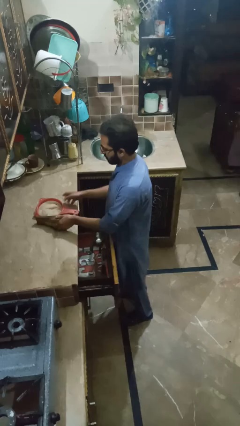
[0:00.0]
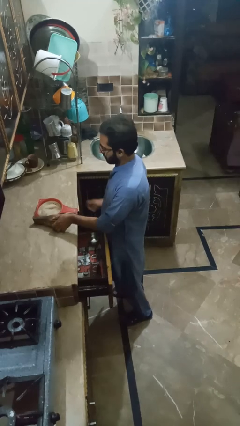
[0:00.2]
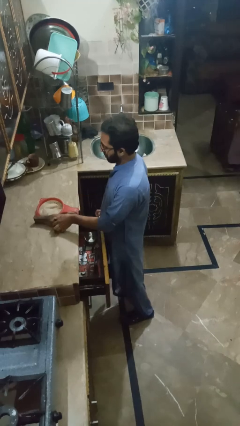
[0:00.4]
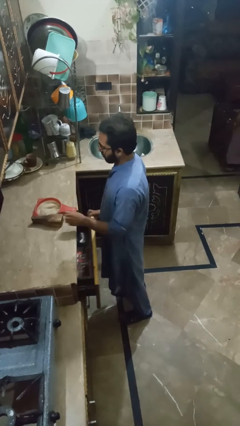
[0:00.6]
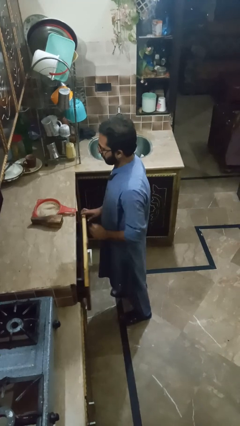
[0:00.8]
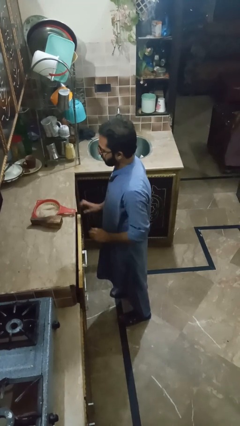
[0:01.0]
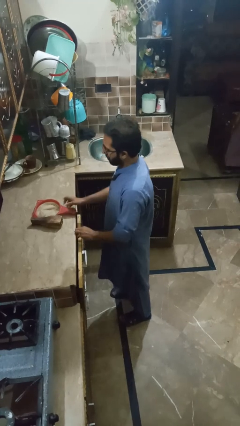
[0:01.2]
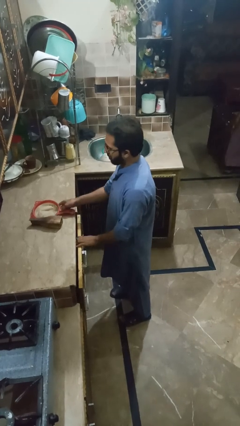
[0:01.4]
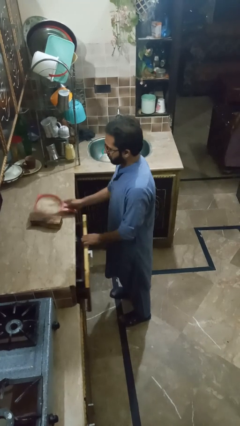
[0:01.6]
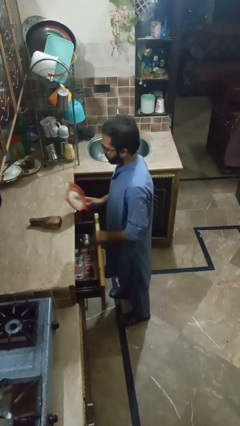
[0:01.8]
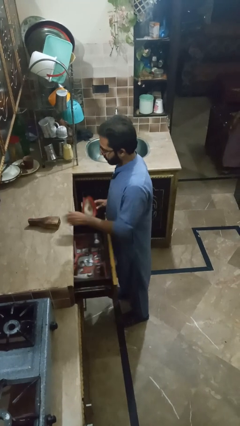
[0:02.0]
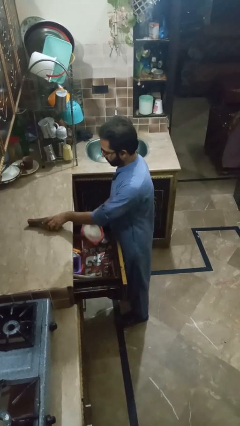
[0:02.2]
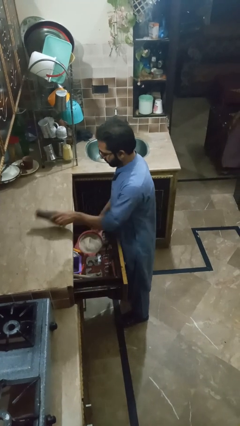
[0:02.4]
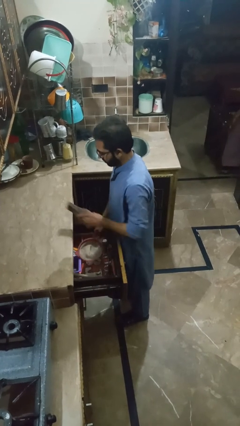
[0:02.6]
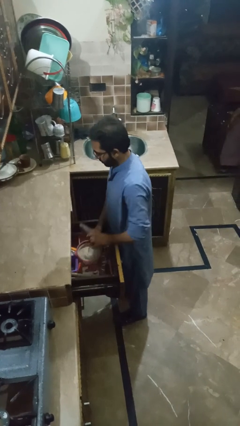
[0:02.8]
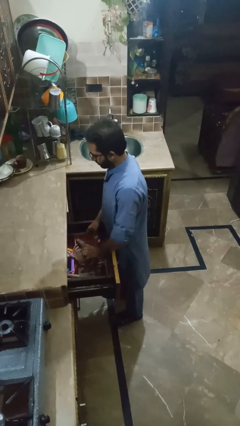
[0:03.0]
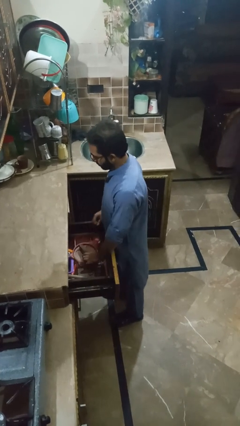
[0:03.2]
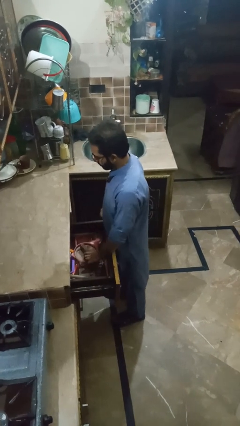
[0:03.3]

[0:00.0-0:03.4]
person takes object from kitchen drawer

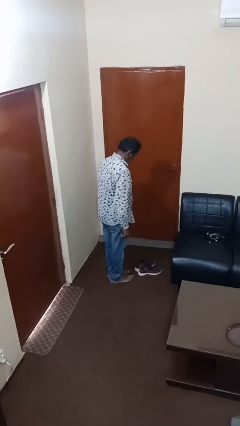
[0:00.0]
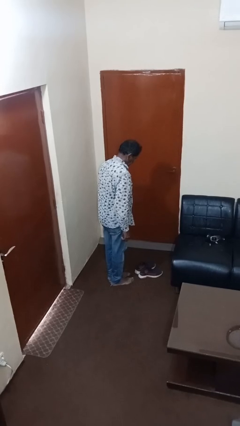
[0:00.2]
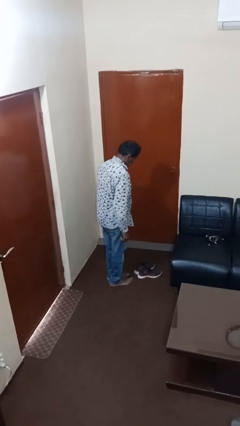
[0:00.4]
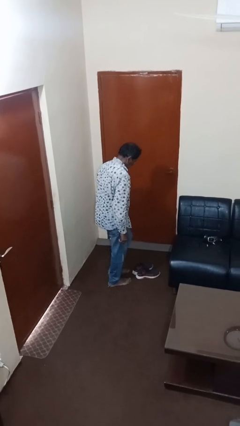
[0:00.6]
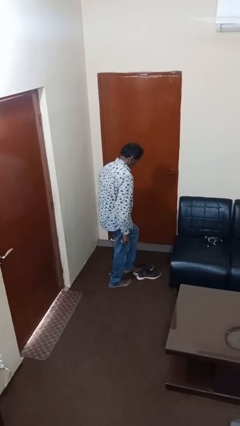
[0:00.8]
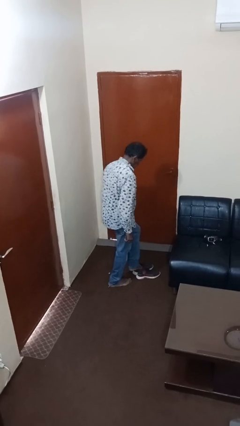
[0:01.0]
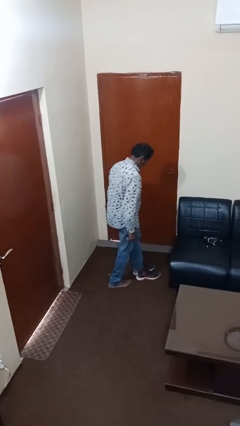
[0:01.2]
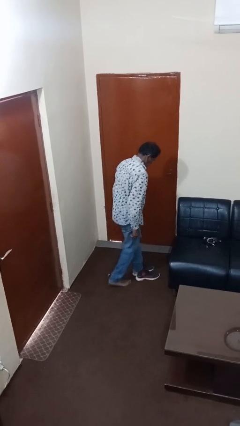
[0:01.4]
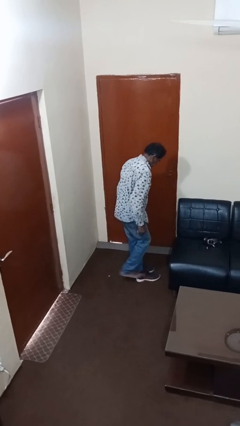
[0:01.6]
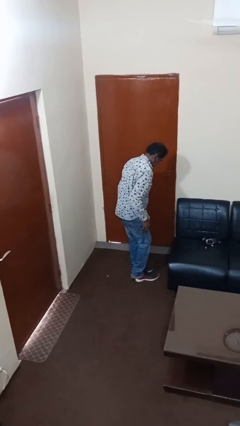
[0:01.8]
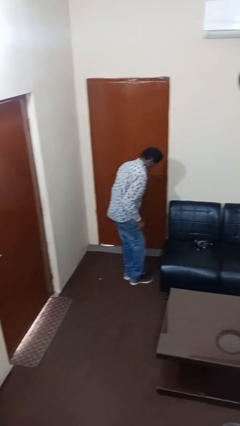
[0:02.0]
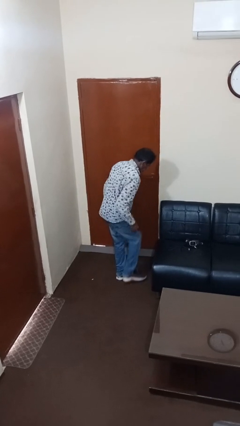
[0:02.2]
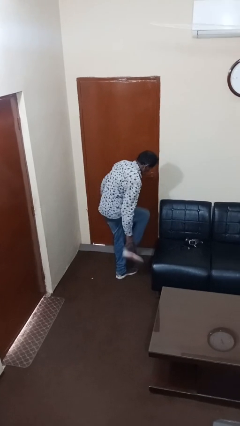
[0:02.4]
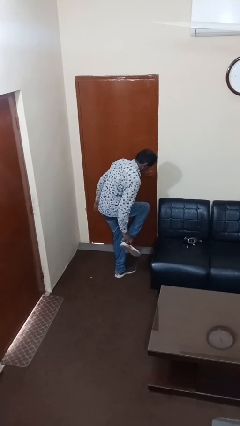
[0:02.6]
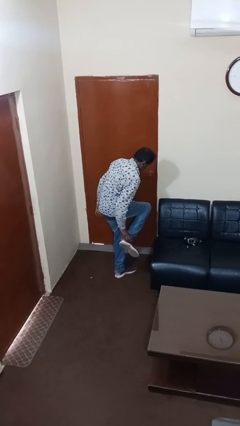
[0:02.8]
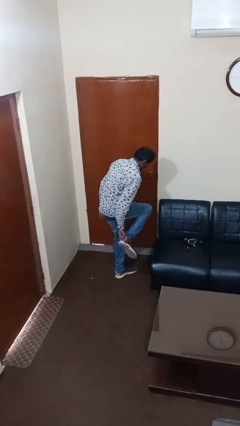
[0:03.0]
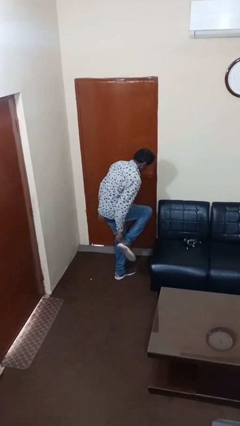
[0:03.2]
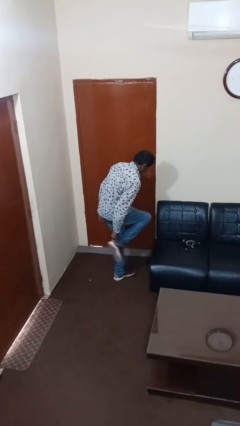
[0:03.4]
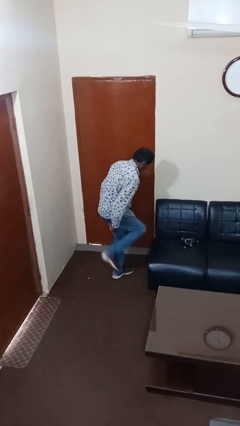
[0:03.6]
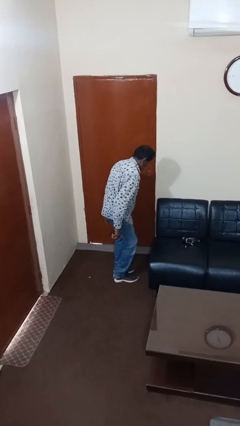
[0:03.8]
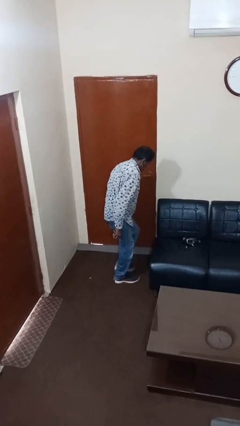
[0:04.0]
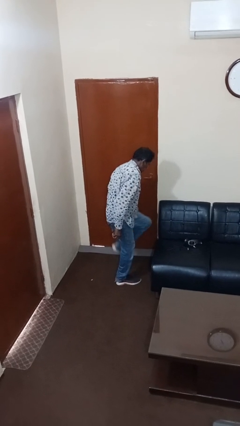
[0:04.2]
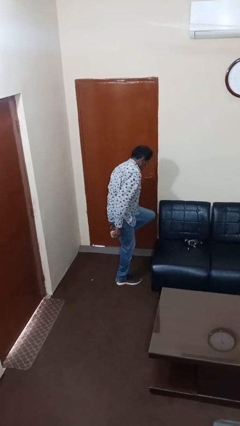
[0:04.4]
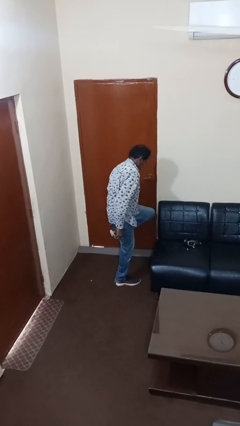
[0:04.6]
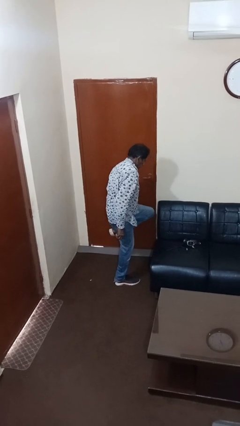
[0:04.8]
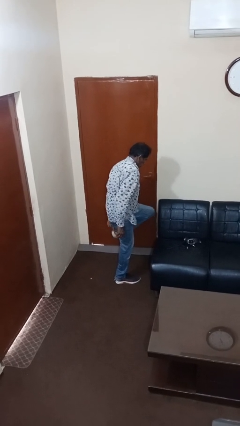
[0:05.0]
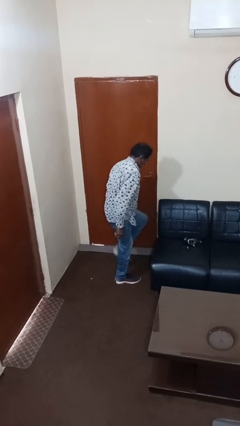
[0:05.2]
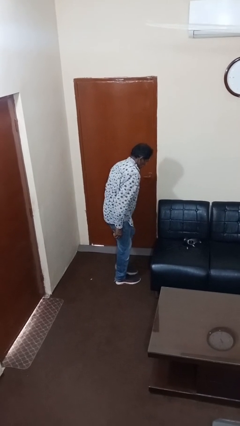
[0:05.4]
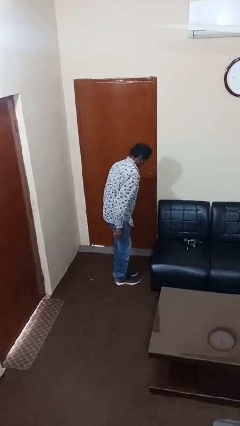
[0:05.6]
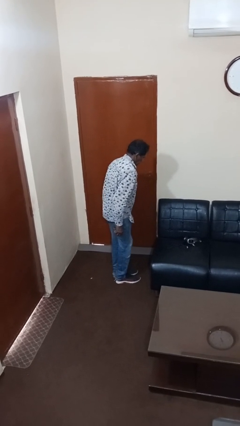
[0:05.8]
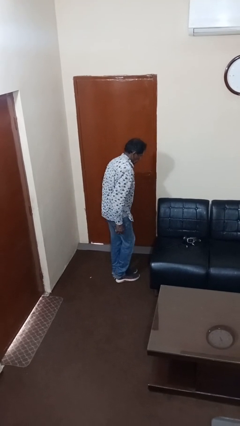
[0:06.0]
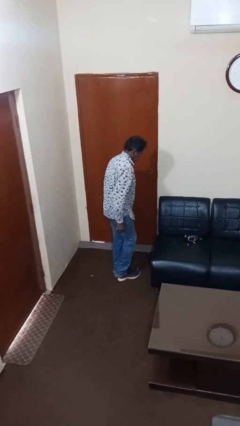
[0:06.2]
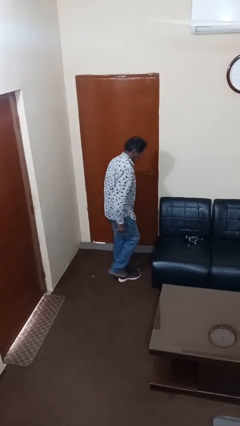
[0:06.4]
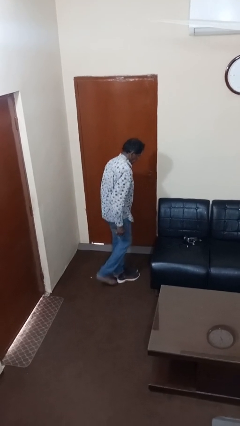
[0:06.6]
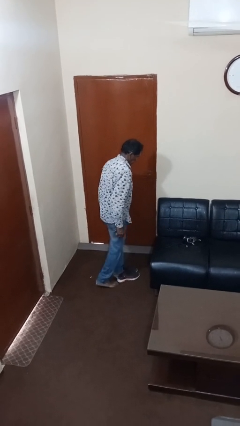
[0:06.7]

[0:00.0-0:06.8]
person puts on shoes

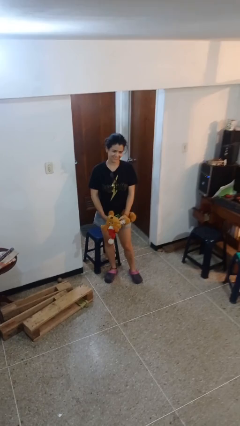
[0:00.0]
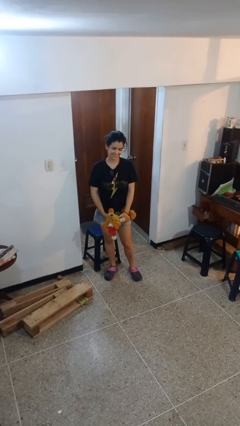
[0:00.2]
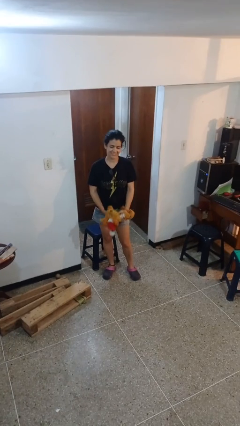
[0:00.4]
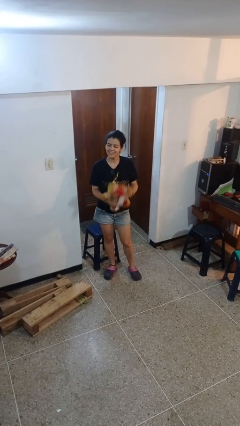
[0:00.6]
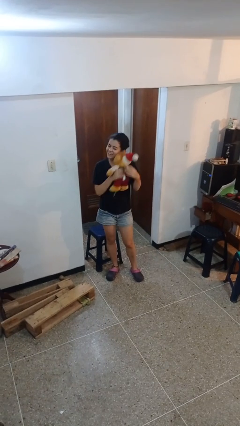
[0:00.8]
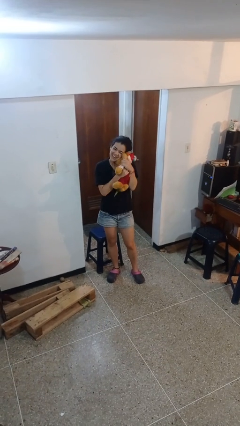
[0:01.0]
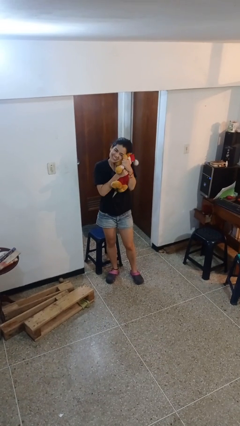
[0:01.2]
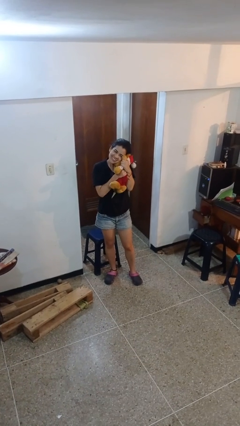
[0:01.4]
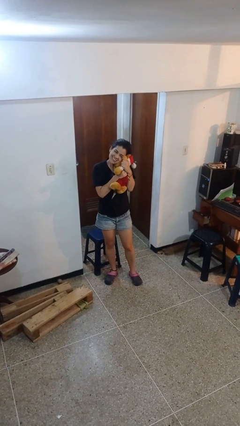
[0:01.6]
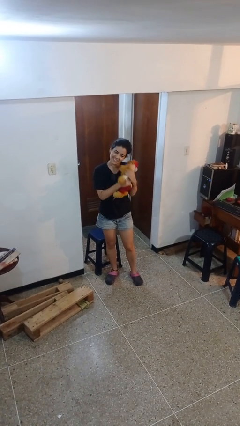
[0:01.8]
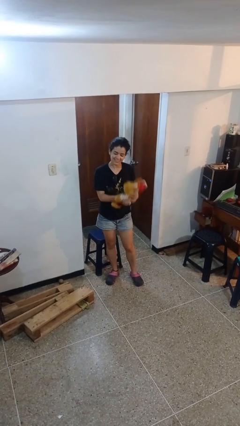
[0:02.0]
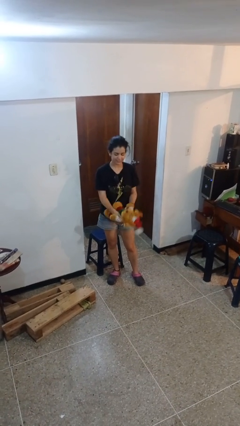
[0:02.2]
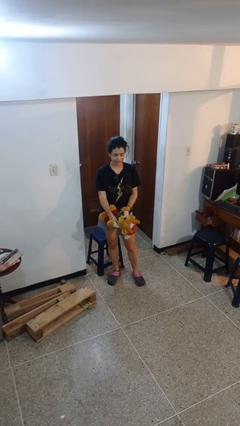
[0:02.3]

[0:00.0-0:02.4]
person hugs stuffed animal

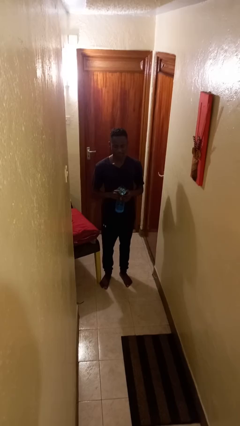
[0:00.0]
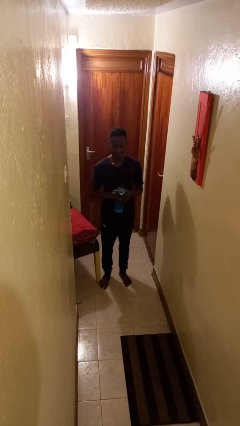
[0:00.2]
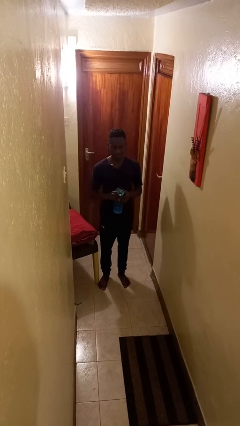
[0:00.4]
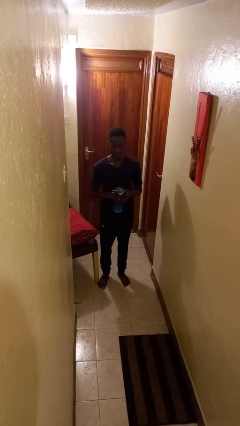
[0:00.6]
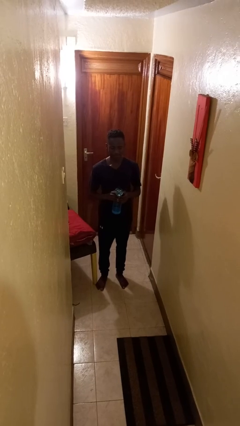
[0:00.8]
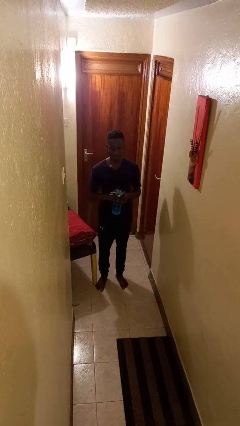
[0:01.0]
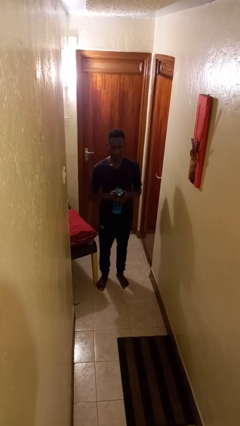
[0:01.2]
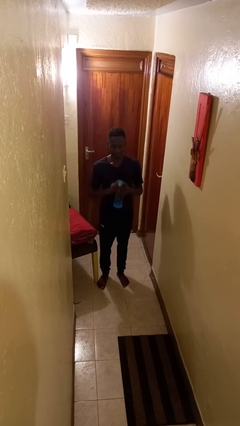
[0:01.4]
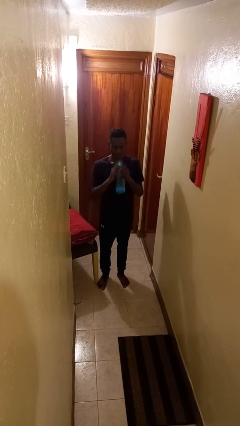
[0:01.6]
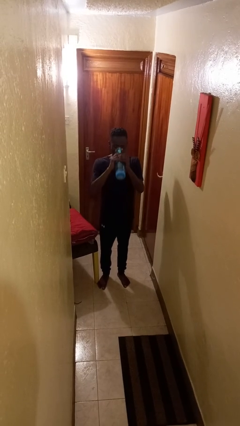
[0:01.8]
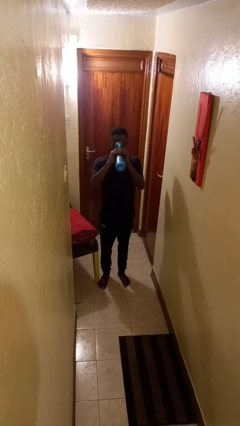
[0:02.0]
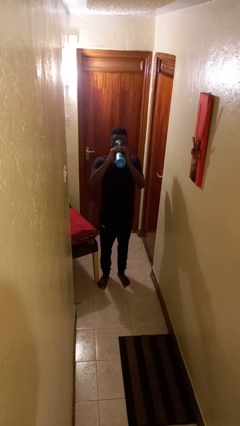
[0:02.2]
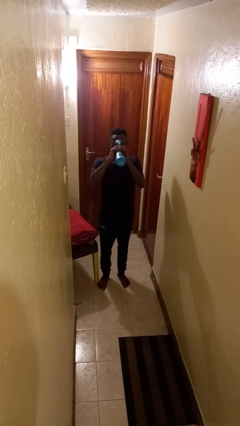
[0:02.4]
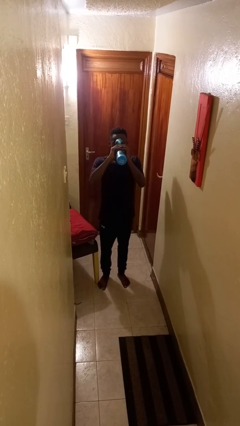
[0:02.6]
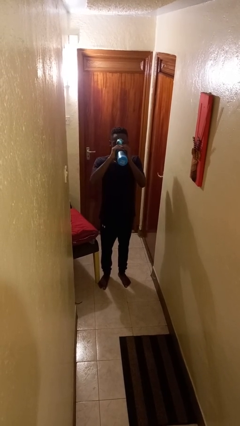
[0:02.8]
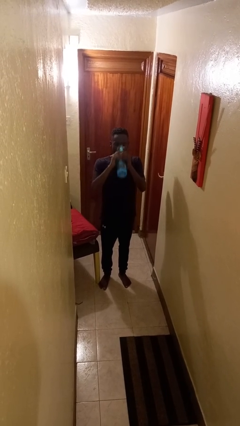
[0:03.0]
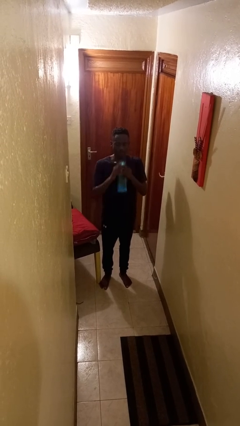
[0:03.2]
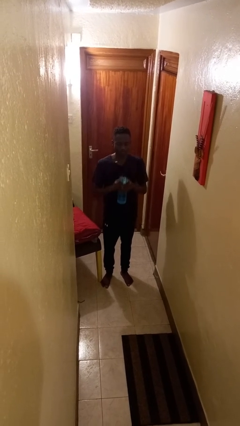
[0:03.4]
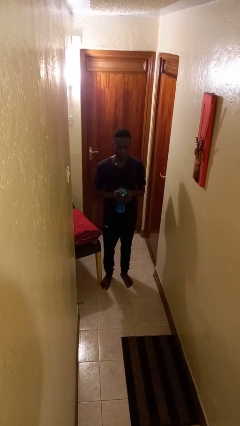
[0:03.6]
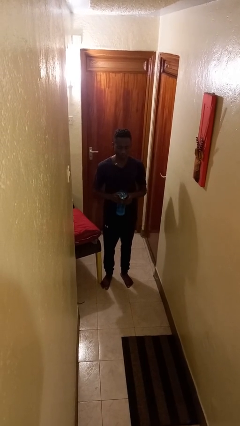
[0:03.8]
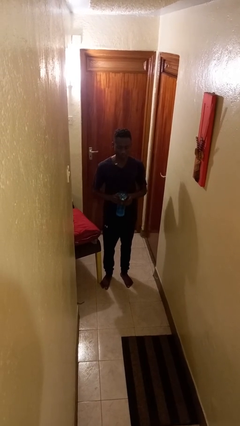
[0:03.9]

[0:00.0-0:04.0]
person drinks from bottle

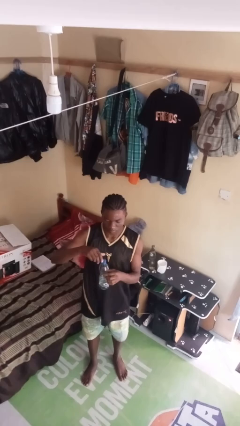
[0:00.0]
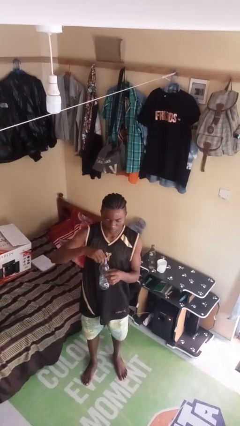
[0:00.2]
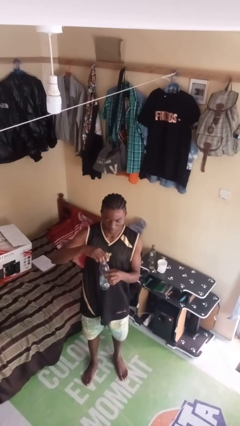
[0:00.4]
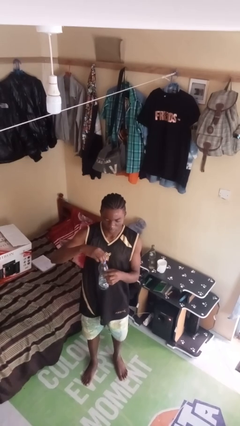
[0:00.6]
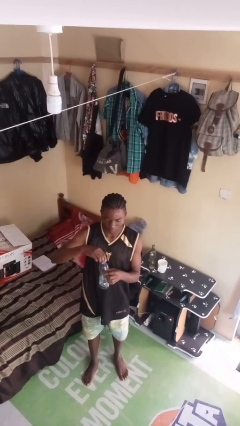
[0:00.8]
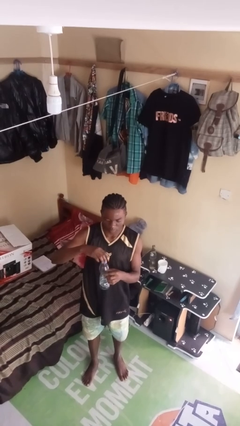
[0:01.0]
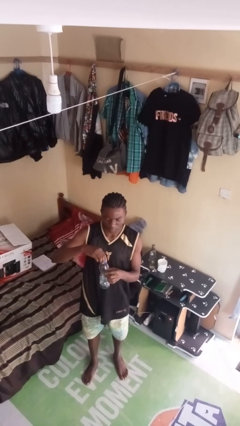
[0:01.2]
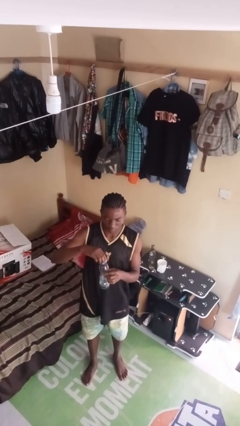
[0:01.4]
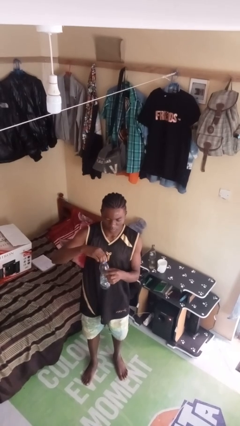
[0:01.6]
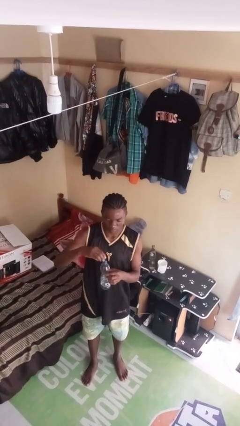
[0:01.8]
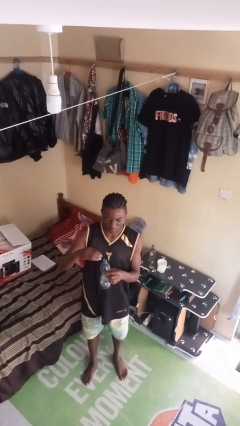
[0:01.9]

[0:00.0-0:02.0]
person unscrews lid from bottle
